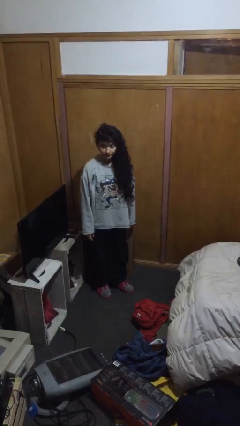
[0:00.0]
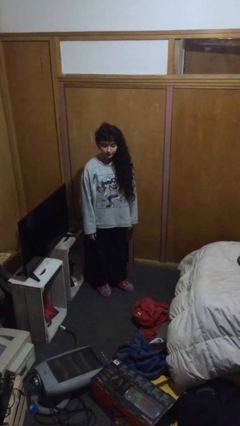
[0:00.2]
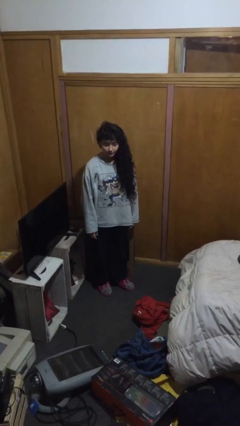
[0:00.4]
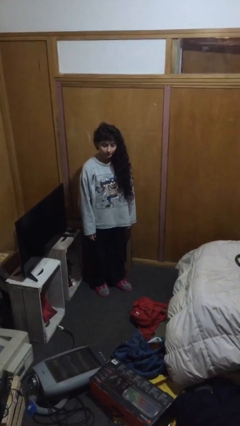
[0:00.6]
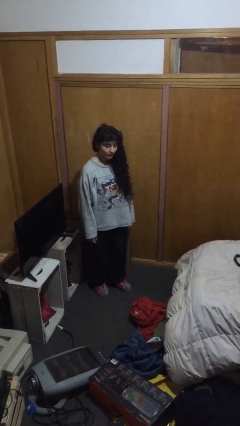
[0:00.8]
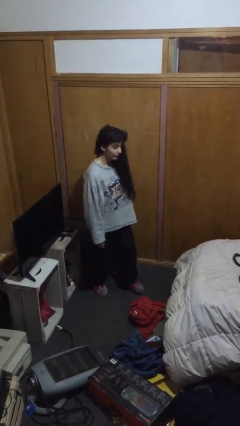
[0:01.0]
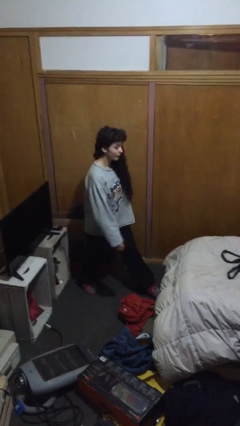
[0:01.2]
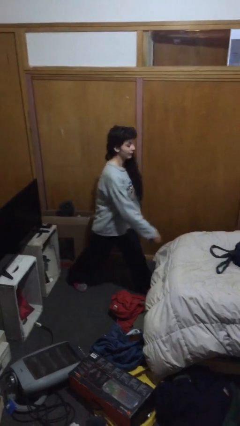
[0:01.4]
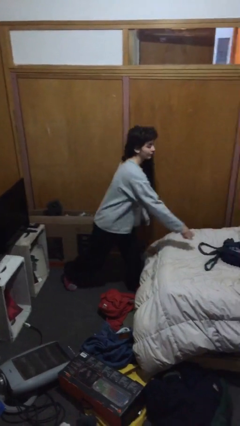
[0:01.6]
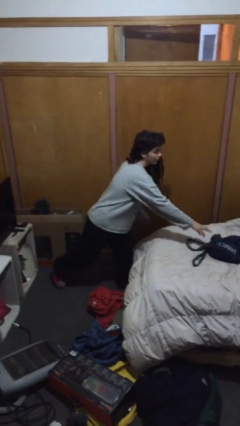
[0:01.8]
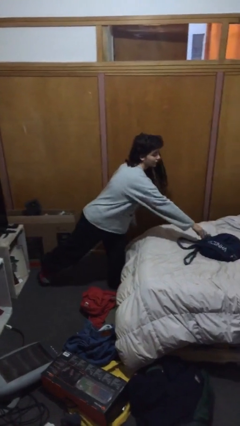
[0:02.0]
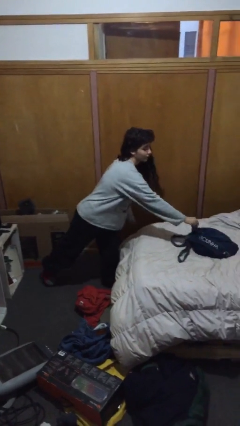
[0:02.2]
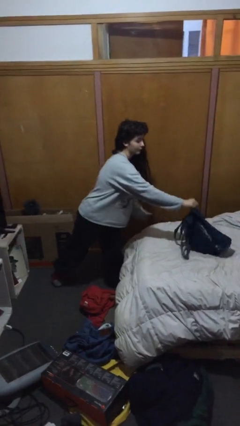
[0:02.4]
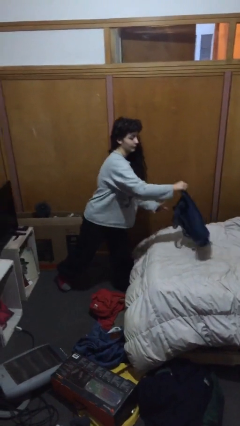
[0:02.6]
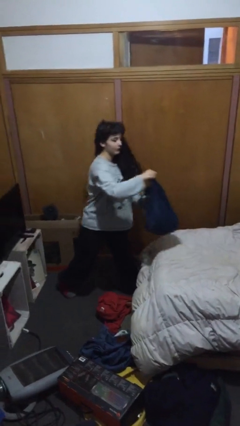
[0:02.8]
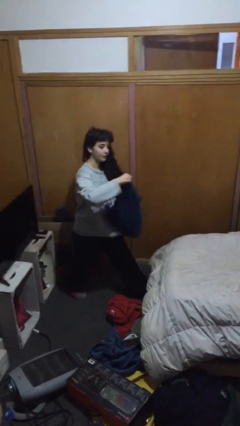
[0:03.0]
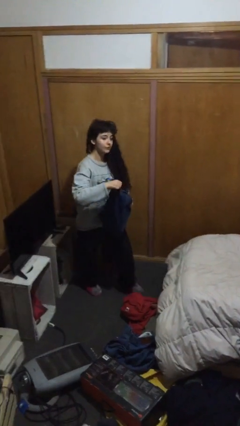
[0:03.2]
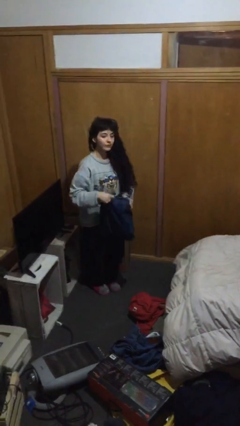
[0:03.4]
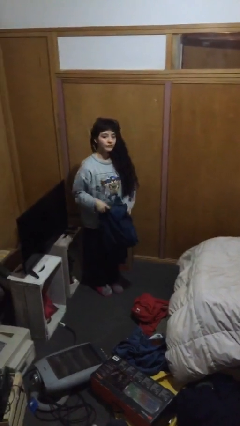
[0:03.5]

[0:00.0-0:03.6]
person picks up object from bed

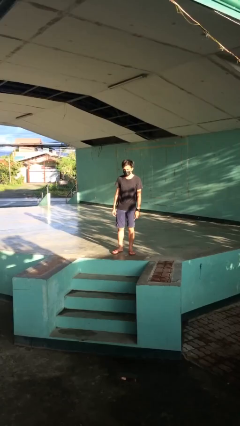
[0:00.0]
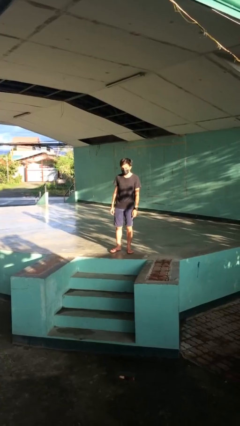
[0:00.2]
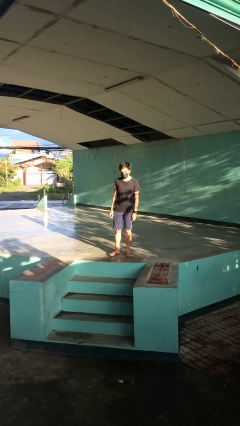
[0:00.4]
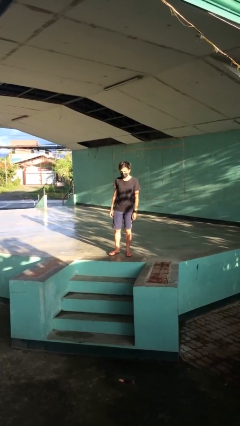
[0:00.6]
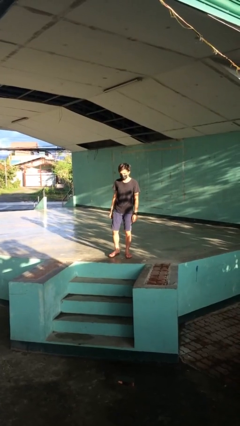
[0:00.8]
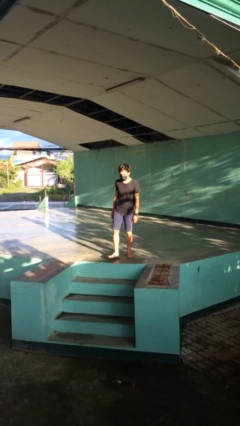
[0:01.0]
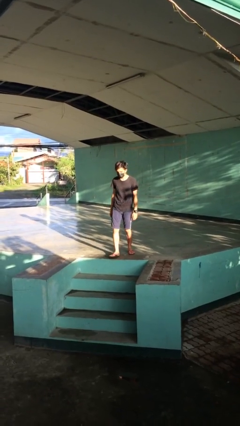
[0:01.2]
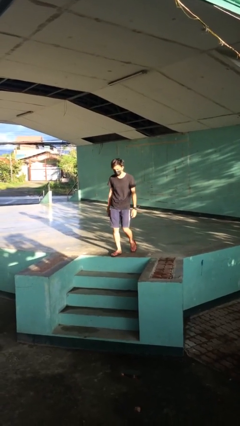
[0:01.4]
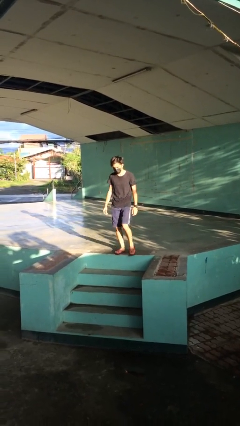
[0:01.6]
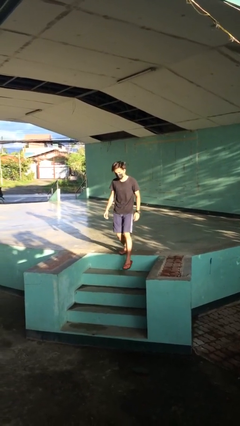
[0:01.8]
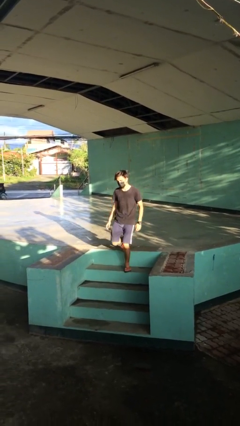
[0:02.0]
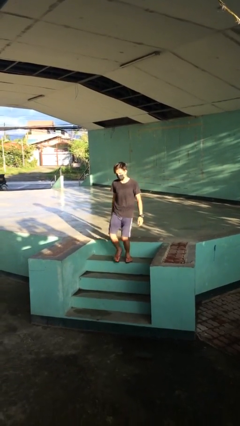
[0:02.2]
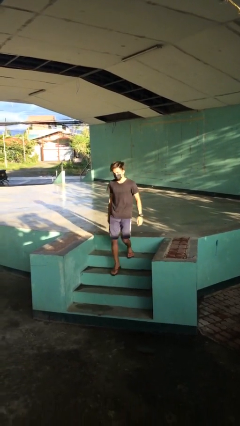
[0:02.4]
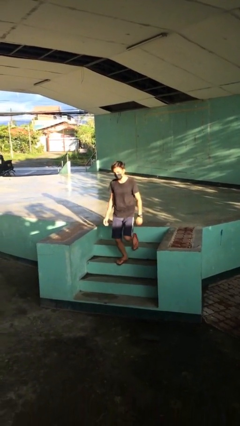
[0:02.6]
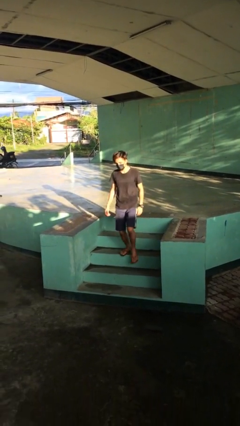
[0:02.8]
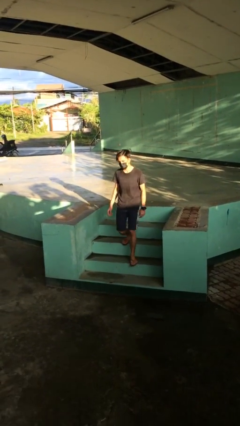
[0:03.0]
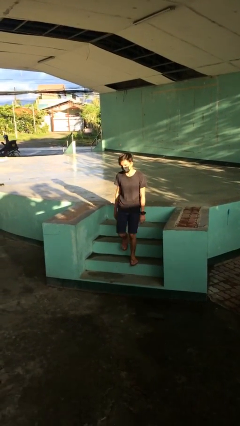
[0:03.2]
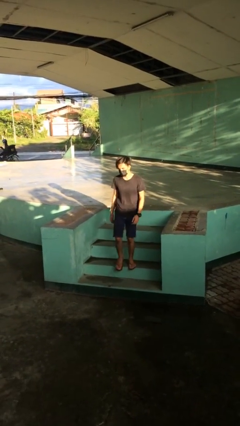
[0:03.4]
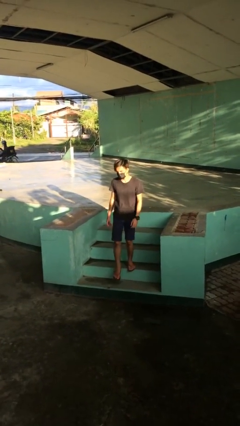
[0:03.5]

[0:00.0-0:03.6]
person climbs down stairs

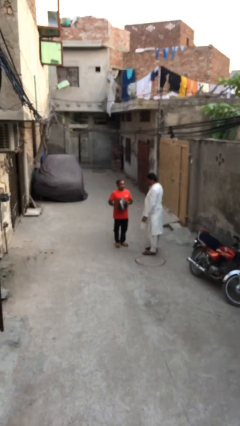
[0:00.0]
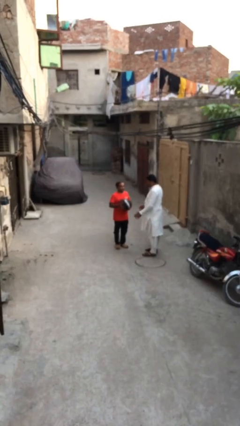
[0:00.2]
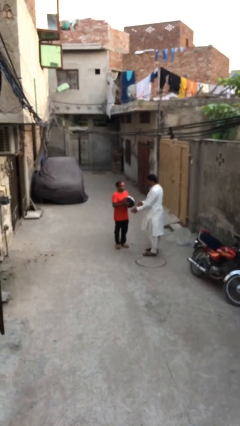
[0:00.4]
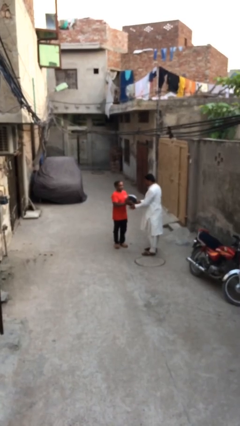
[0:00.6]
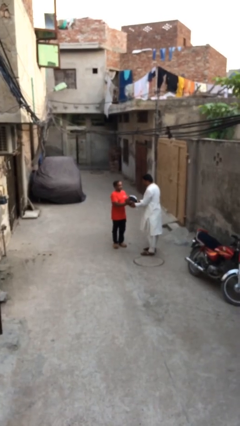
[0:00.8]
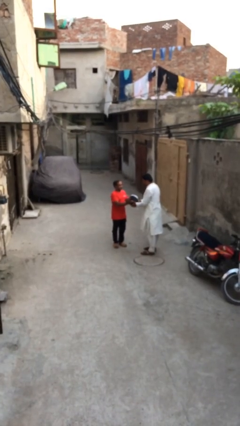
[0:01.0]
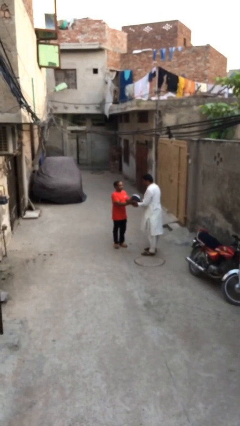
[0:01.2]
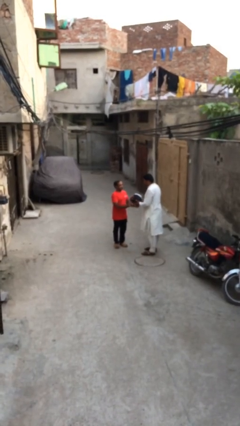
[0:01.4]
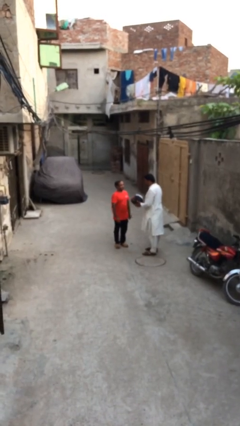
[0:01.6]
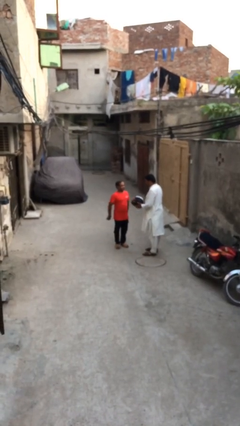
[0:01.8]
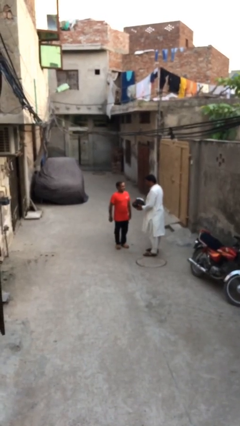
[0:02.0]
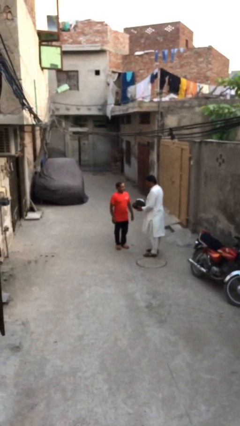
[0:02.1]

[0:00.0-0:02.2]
person transfers object to person

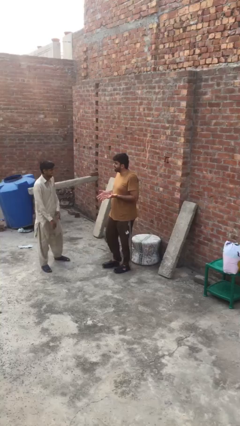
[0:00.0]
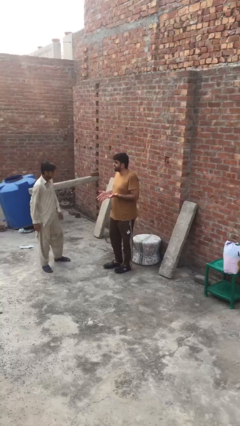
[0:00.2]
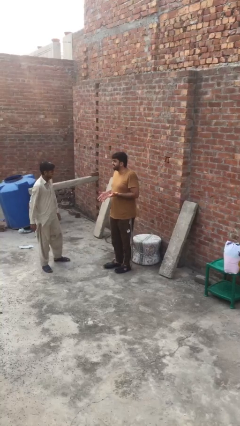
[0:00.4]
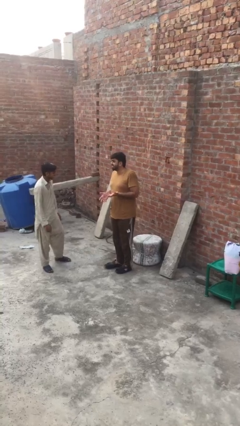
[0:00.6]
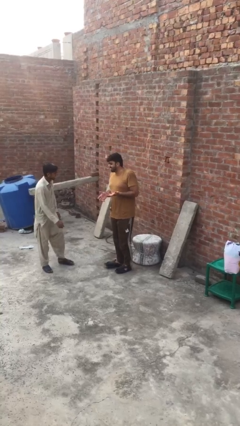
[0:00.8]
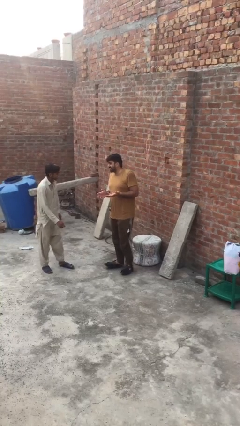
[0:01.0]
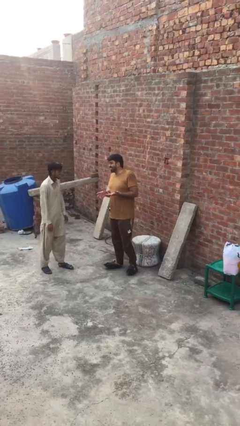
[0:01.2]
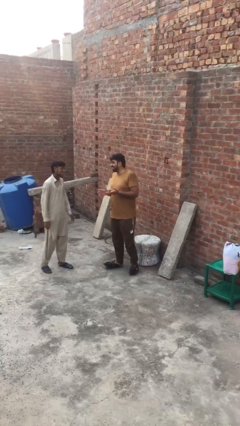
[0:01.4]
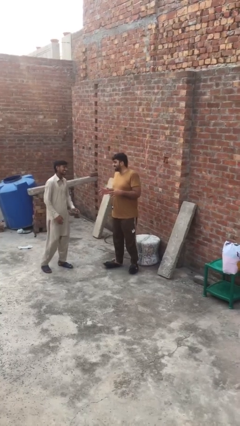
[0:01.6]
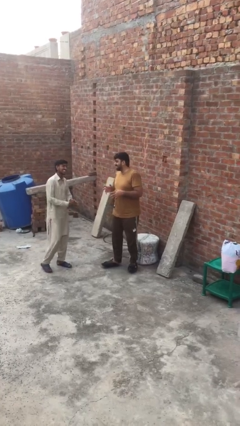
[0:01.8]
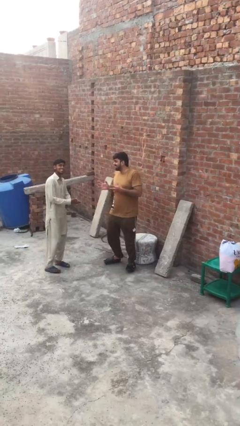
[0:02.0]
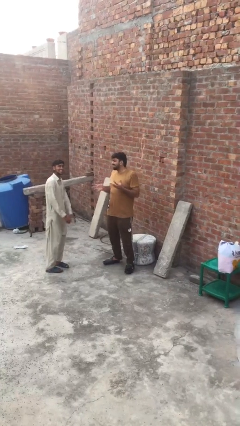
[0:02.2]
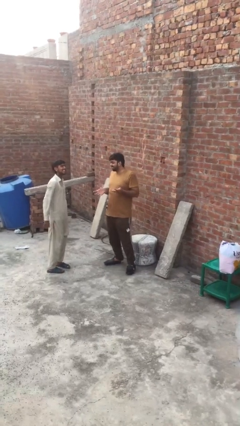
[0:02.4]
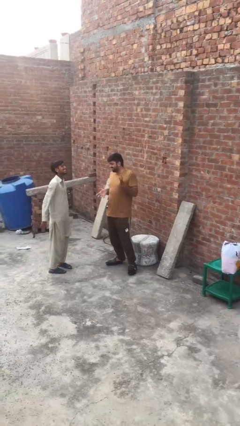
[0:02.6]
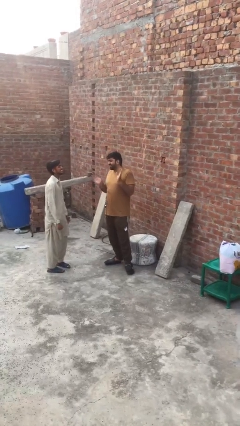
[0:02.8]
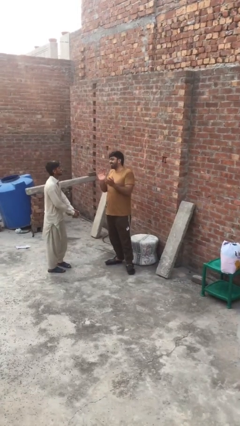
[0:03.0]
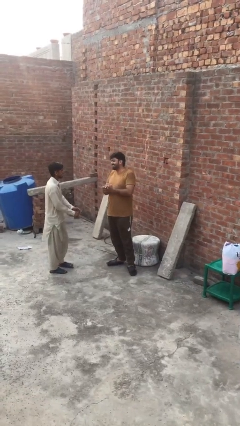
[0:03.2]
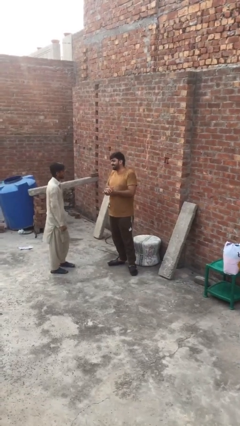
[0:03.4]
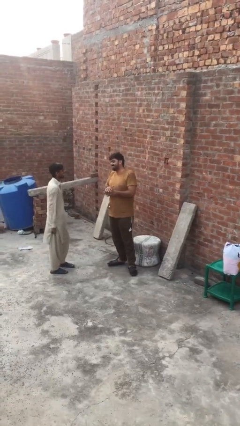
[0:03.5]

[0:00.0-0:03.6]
person talks to person

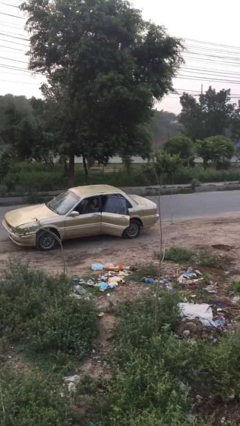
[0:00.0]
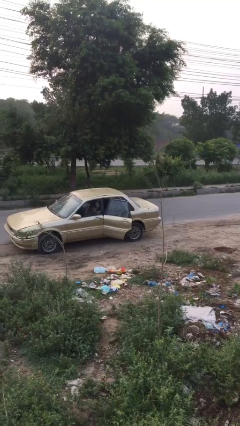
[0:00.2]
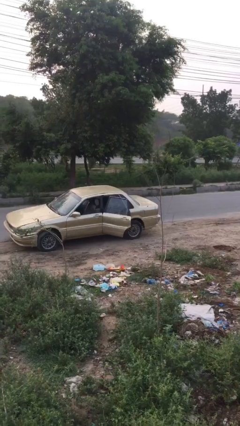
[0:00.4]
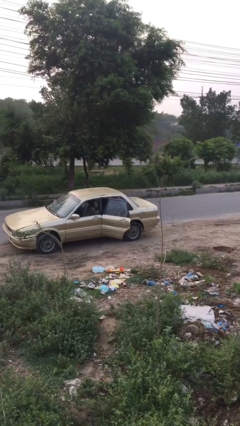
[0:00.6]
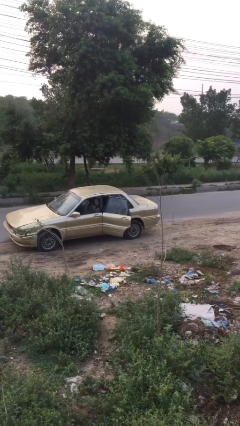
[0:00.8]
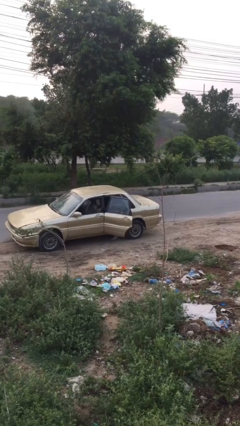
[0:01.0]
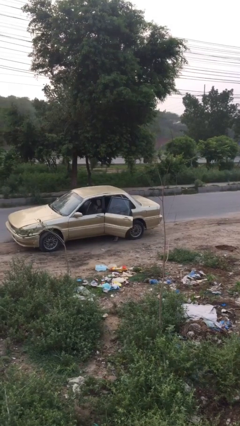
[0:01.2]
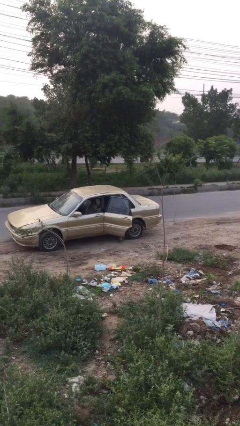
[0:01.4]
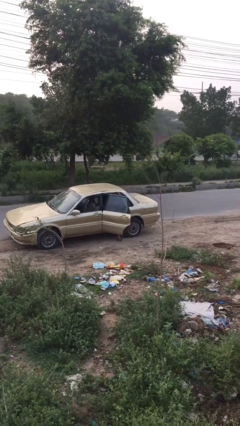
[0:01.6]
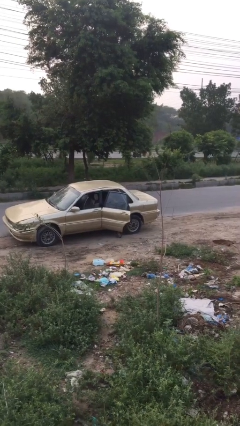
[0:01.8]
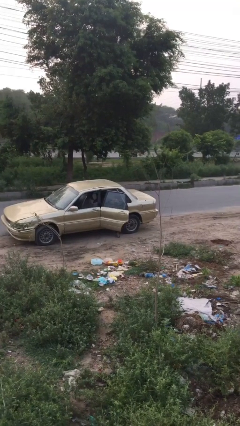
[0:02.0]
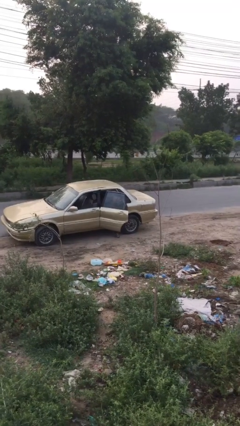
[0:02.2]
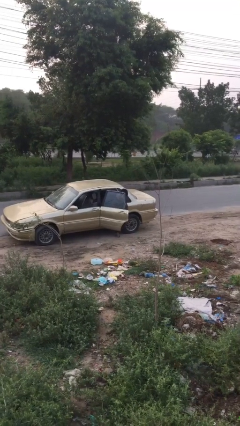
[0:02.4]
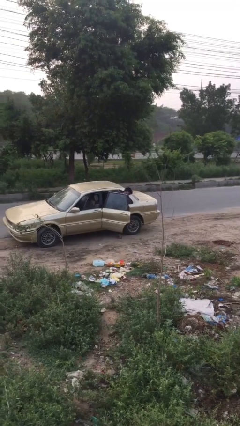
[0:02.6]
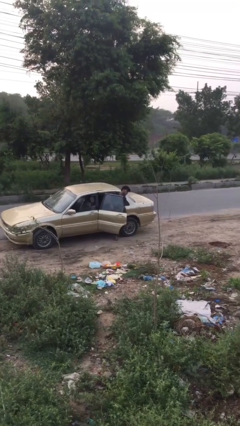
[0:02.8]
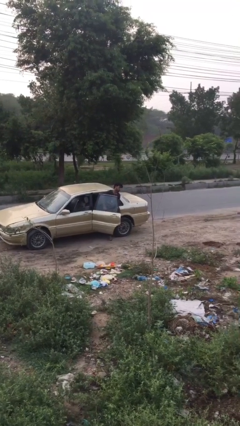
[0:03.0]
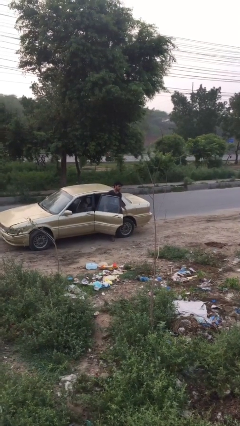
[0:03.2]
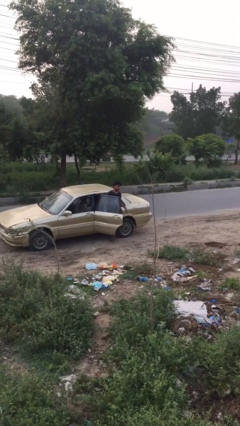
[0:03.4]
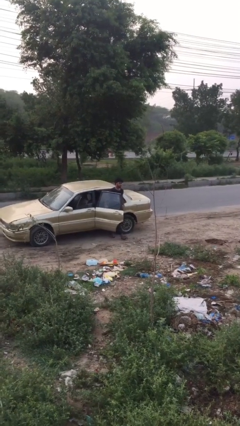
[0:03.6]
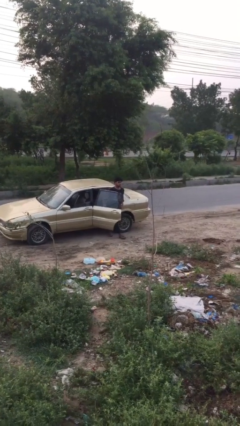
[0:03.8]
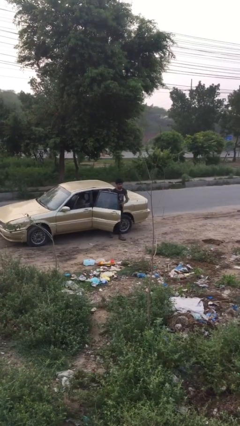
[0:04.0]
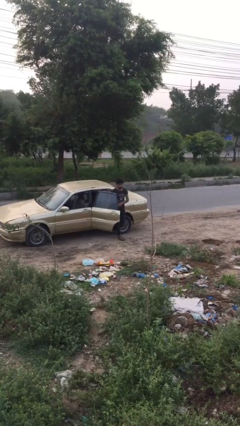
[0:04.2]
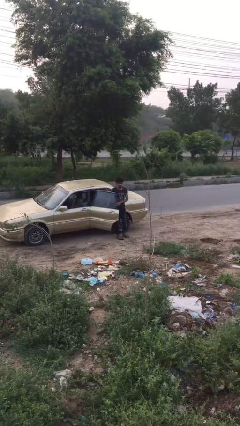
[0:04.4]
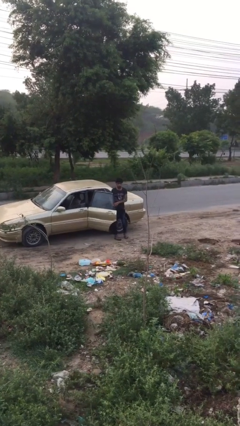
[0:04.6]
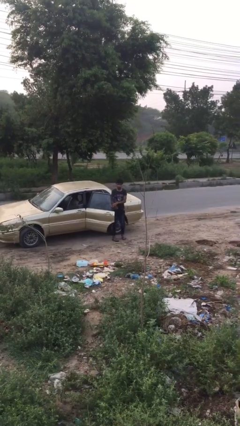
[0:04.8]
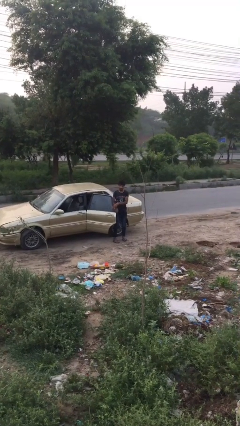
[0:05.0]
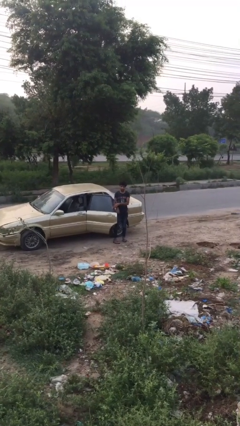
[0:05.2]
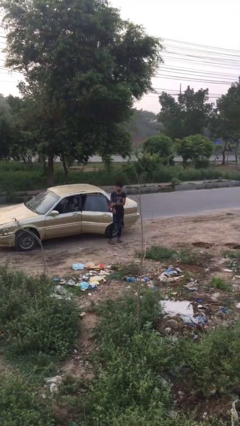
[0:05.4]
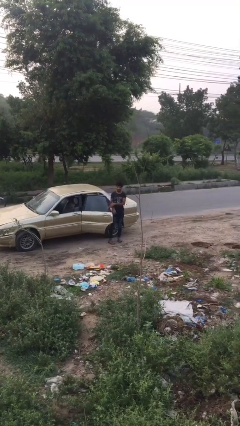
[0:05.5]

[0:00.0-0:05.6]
person exits car
